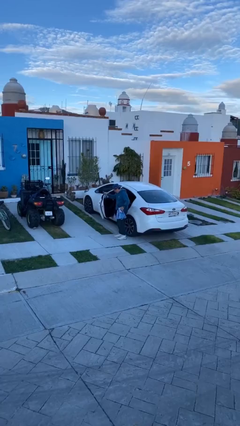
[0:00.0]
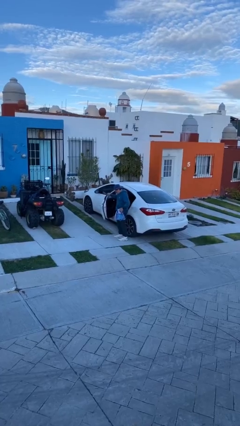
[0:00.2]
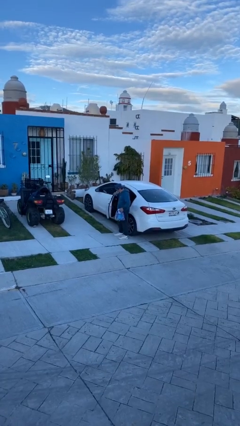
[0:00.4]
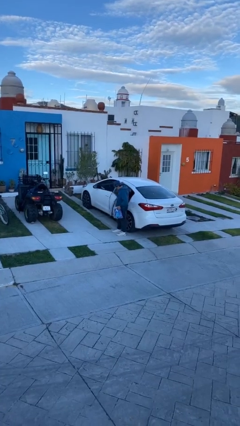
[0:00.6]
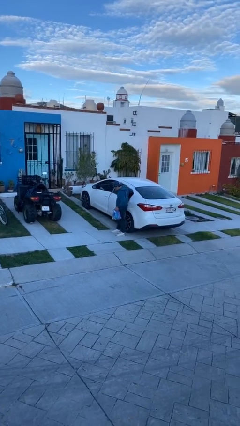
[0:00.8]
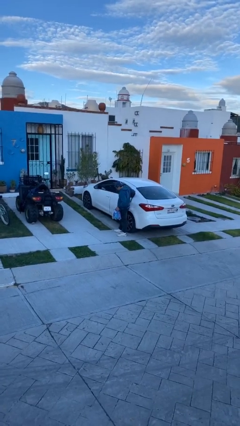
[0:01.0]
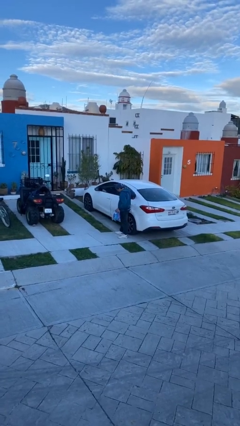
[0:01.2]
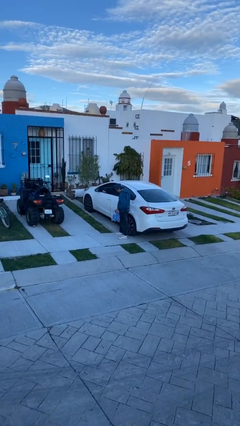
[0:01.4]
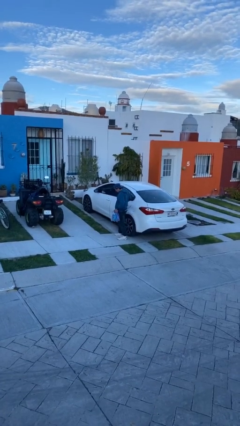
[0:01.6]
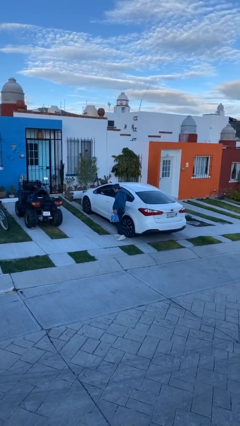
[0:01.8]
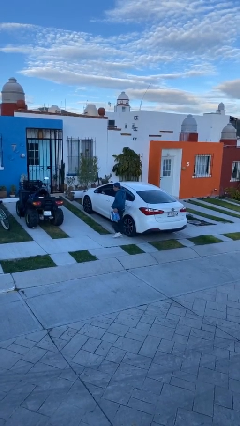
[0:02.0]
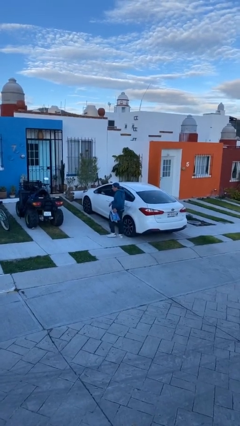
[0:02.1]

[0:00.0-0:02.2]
person closes car door

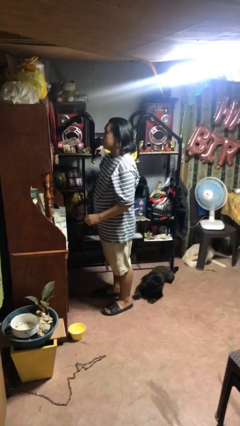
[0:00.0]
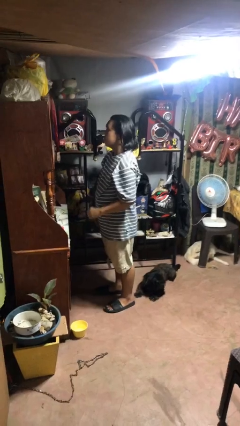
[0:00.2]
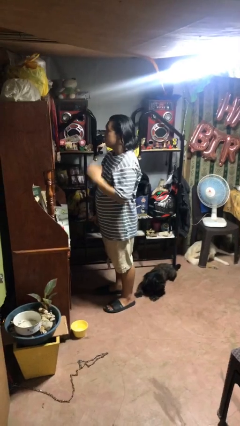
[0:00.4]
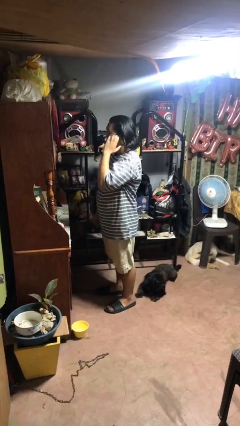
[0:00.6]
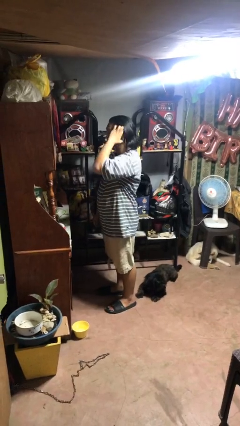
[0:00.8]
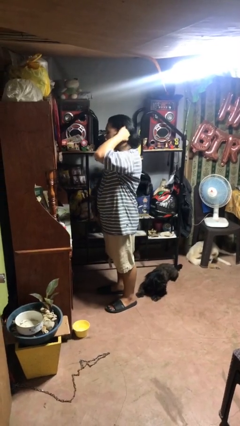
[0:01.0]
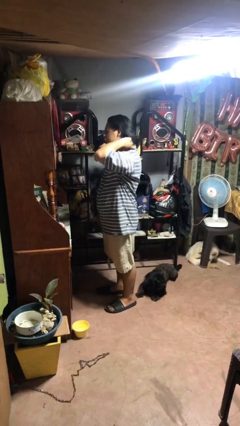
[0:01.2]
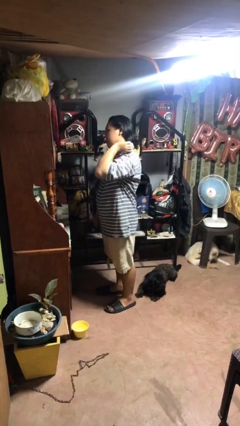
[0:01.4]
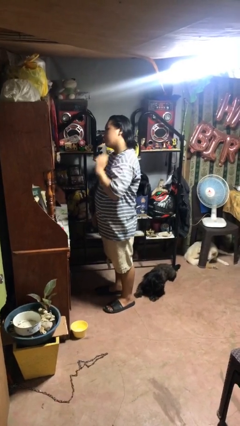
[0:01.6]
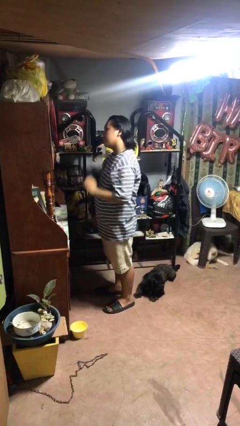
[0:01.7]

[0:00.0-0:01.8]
person strokes hair

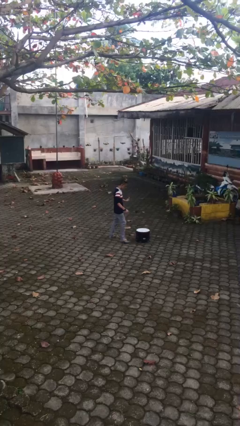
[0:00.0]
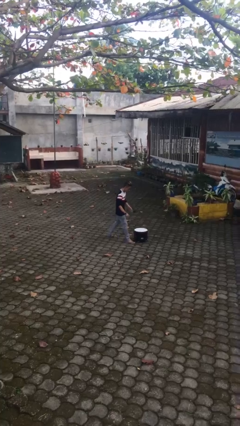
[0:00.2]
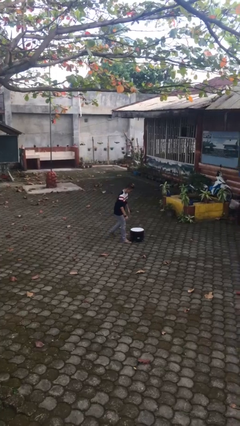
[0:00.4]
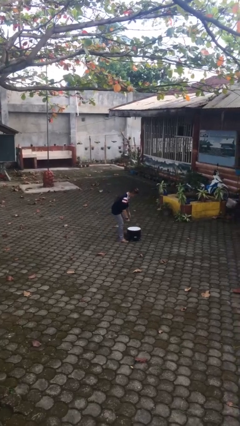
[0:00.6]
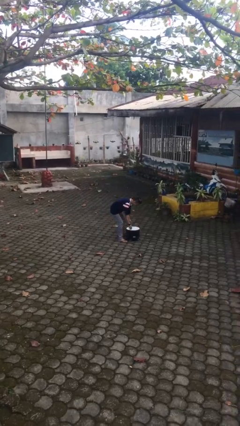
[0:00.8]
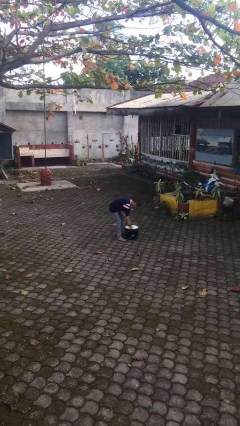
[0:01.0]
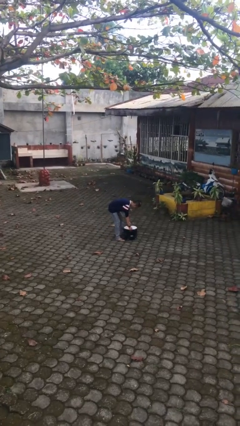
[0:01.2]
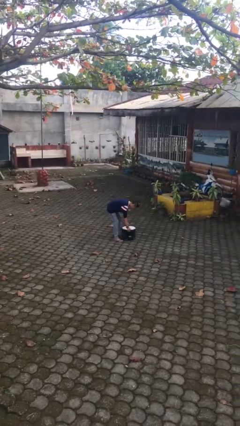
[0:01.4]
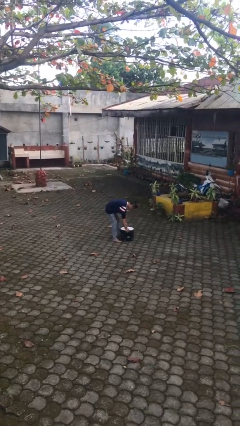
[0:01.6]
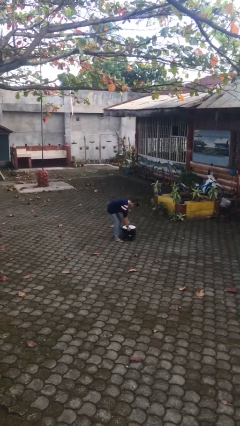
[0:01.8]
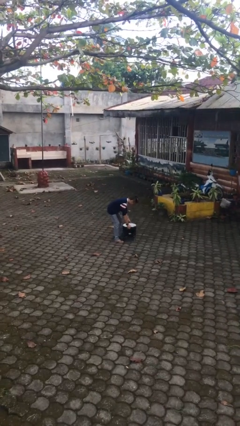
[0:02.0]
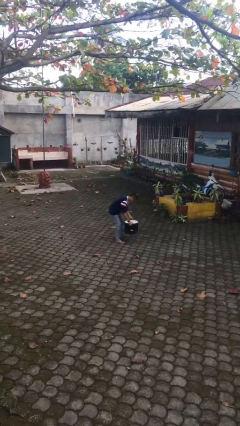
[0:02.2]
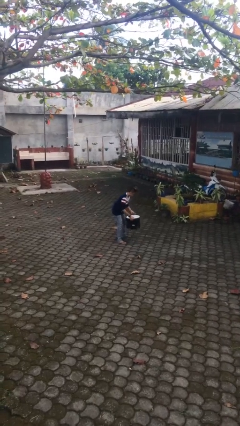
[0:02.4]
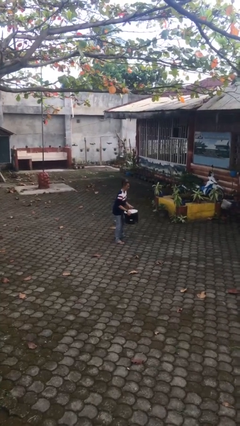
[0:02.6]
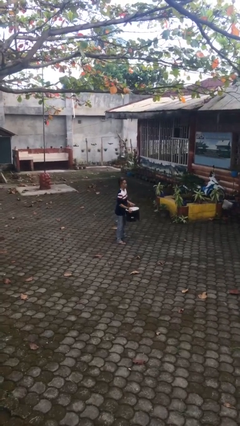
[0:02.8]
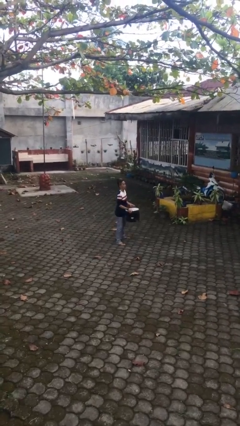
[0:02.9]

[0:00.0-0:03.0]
person picks up object from floor

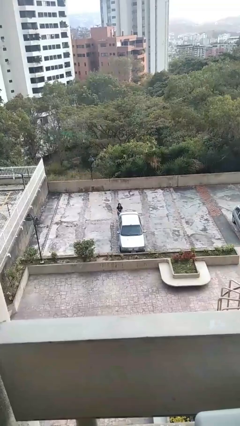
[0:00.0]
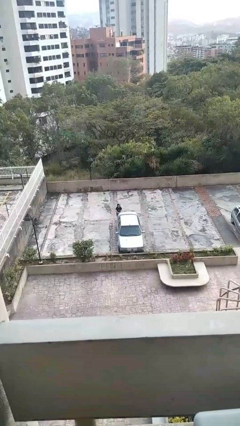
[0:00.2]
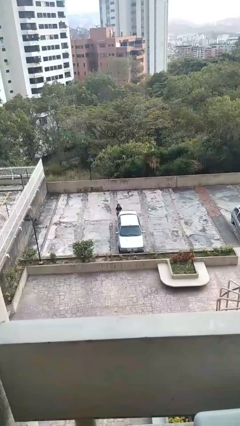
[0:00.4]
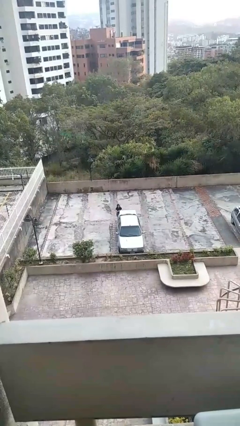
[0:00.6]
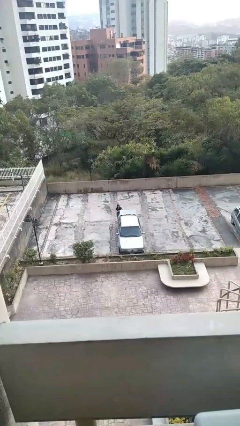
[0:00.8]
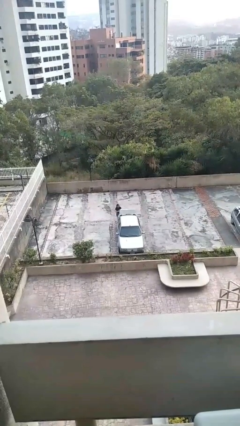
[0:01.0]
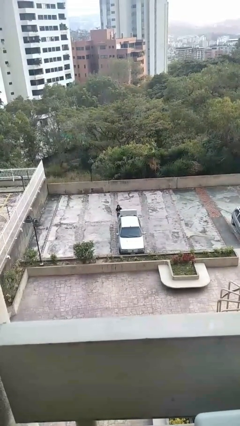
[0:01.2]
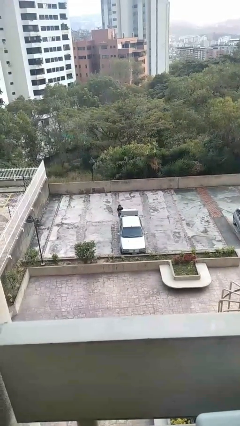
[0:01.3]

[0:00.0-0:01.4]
person opens car trunk

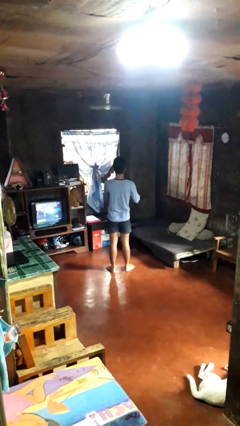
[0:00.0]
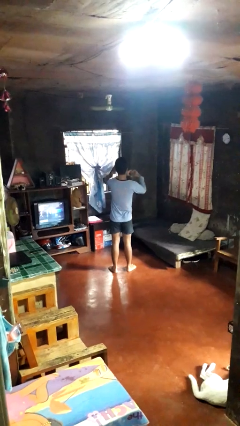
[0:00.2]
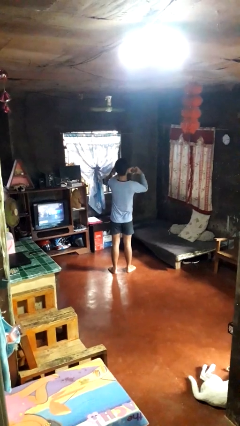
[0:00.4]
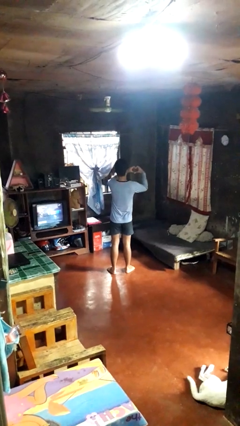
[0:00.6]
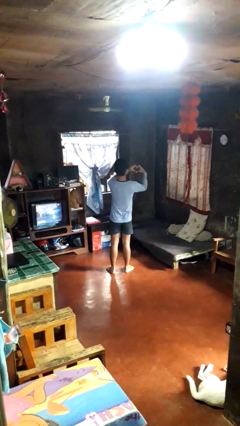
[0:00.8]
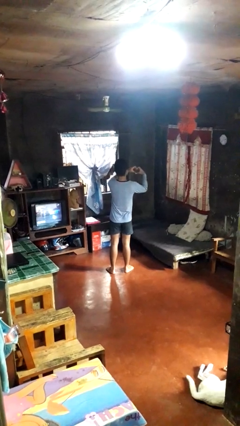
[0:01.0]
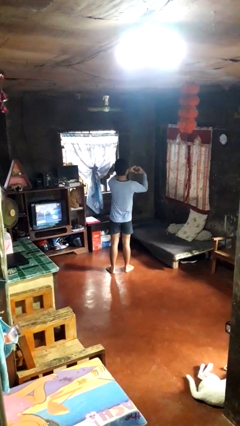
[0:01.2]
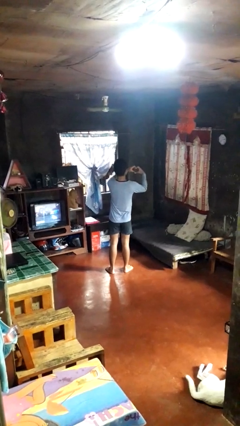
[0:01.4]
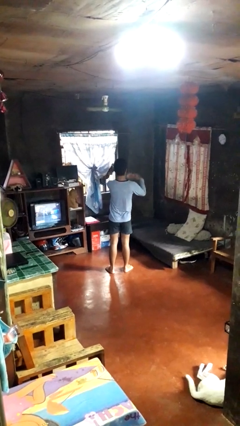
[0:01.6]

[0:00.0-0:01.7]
person gestures heart

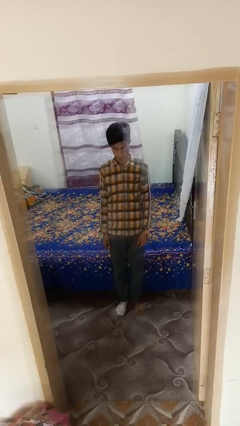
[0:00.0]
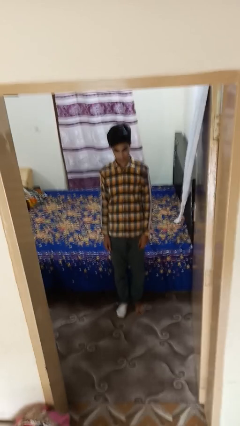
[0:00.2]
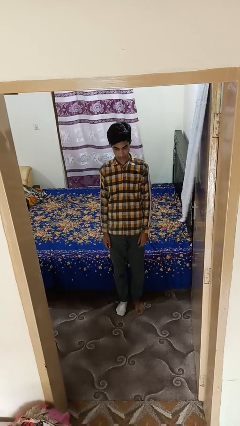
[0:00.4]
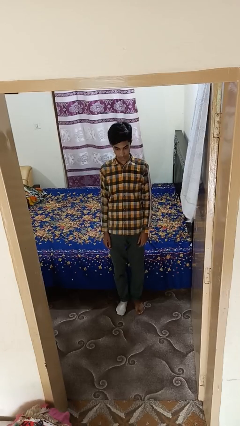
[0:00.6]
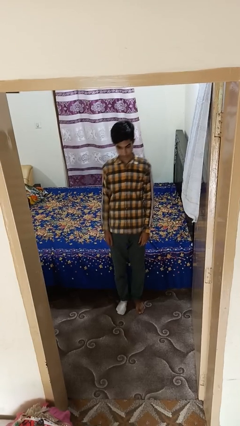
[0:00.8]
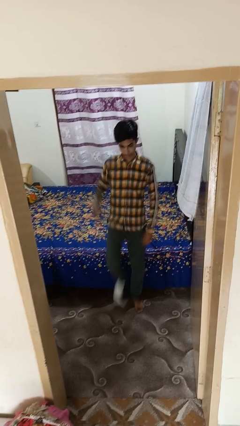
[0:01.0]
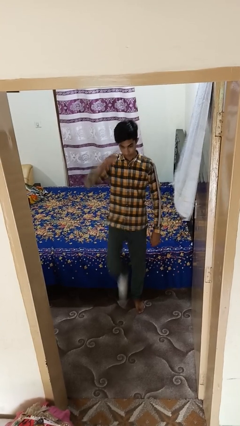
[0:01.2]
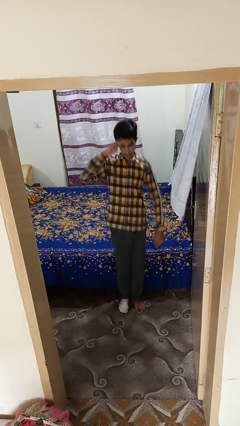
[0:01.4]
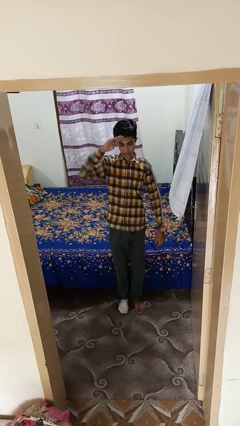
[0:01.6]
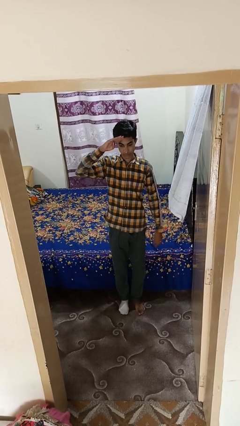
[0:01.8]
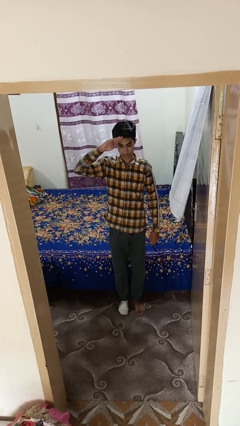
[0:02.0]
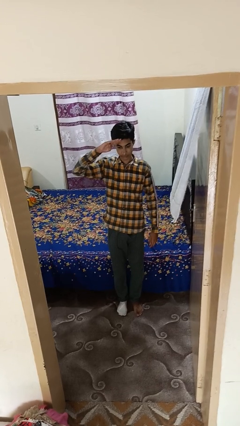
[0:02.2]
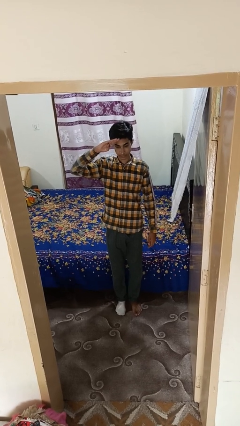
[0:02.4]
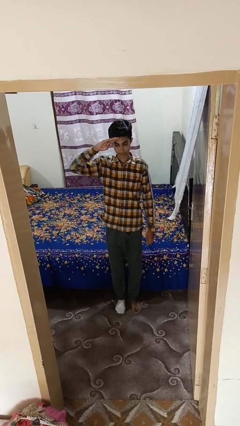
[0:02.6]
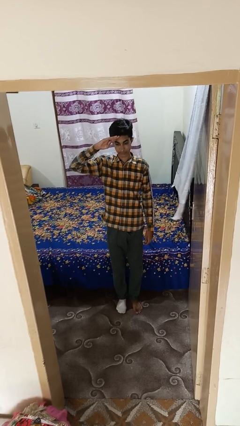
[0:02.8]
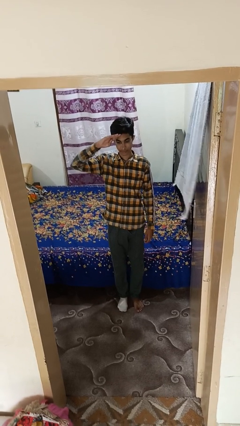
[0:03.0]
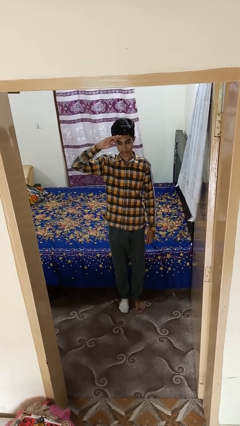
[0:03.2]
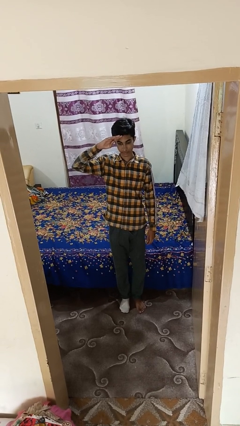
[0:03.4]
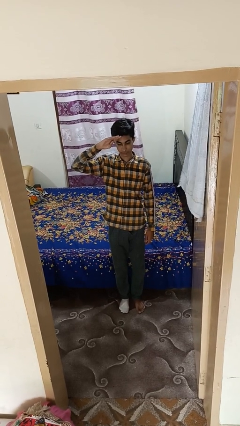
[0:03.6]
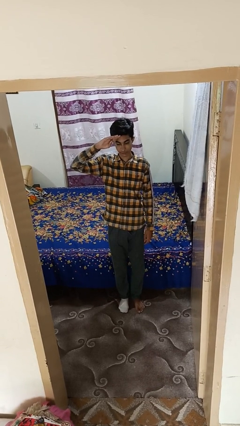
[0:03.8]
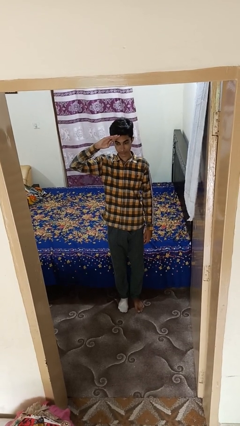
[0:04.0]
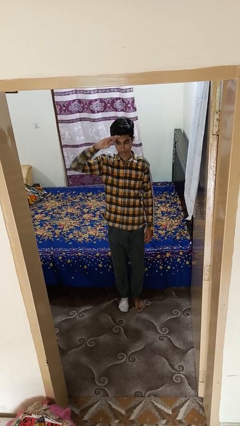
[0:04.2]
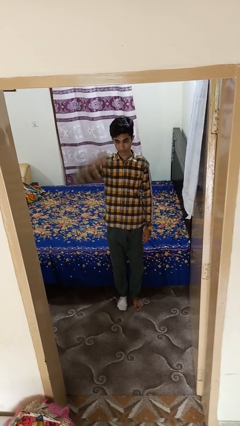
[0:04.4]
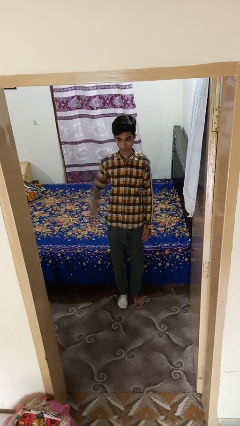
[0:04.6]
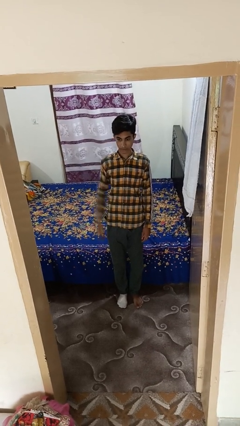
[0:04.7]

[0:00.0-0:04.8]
person salutes

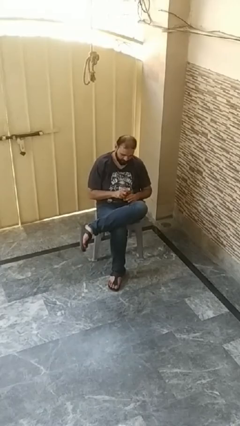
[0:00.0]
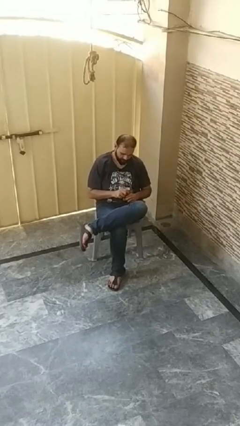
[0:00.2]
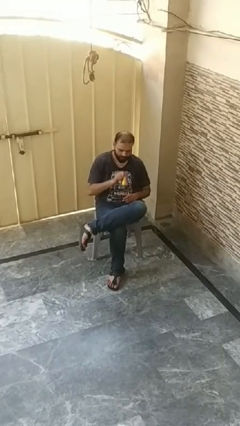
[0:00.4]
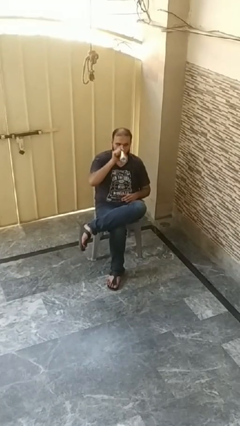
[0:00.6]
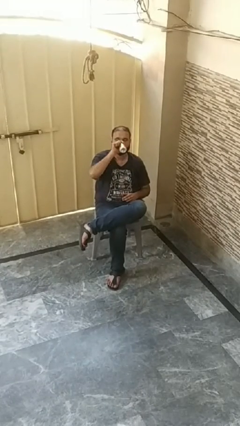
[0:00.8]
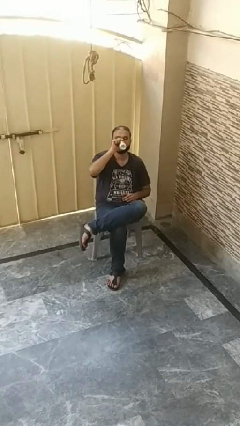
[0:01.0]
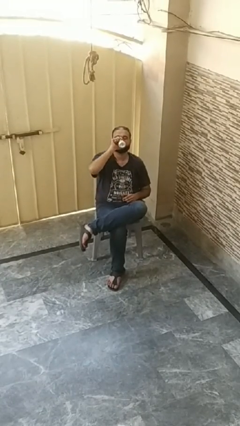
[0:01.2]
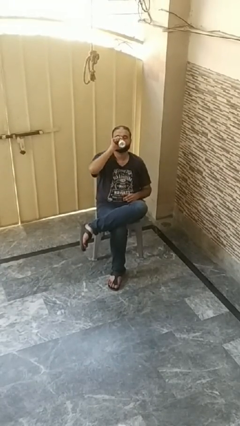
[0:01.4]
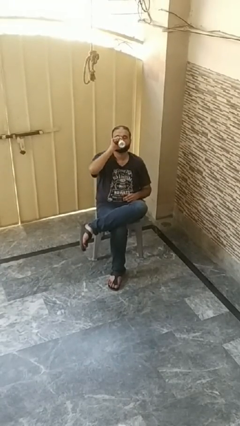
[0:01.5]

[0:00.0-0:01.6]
person drinks from beverage can

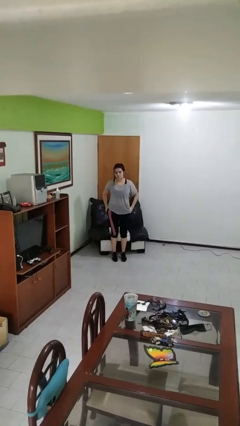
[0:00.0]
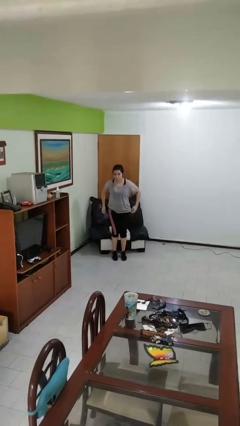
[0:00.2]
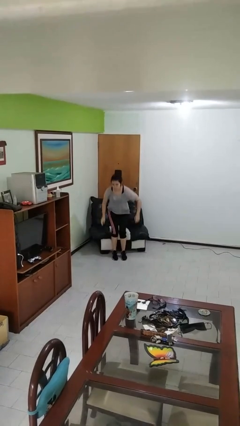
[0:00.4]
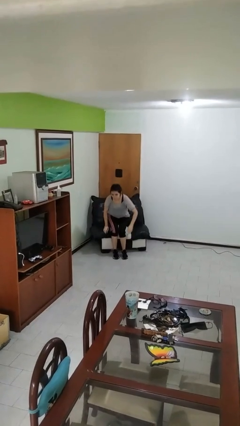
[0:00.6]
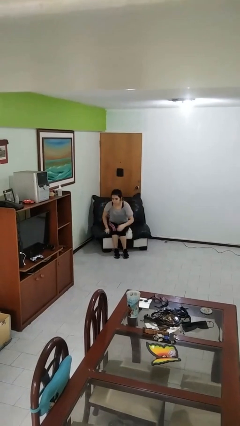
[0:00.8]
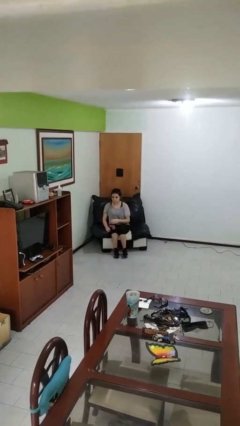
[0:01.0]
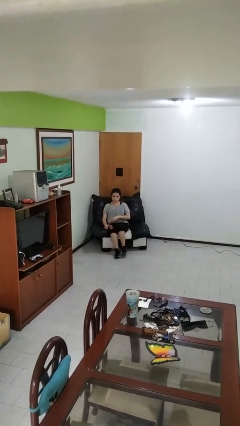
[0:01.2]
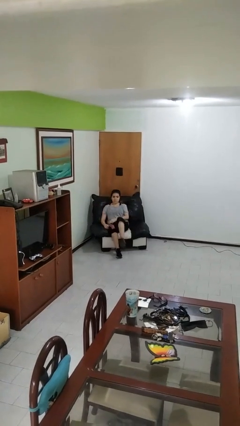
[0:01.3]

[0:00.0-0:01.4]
person lies down on couch
